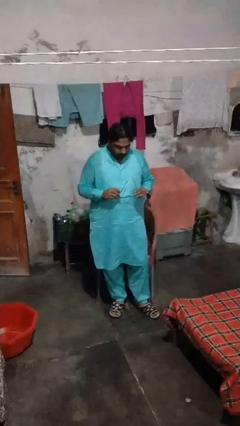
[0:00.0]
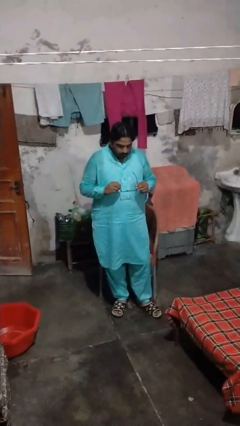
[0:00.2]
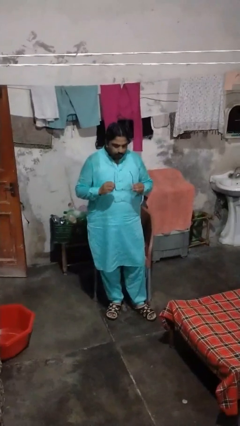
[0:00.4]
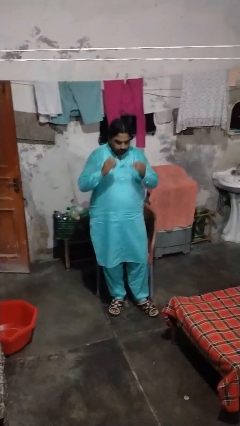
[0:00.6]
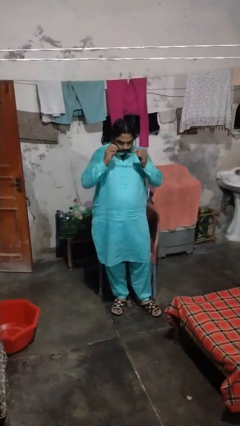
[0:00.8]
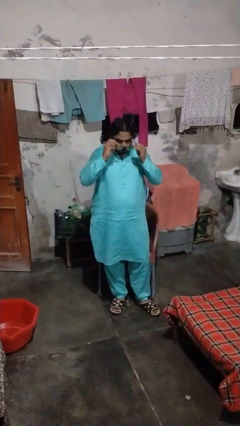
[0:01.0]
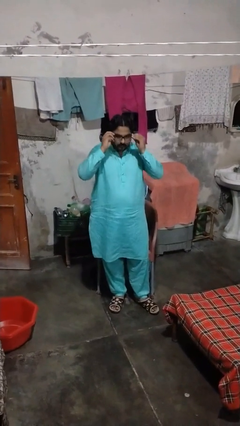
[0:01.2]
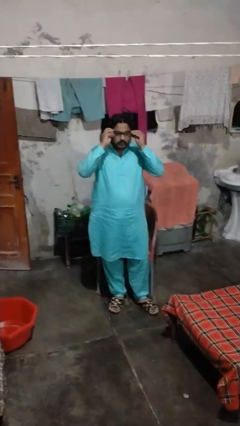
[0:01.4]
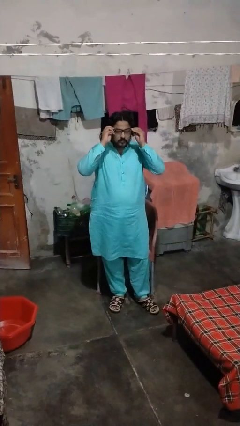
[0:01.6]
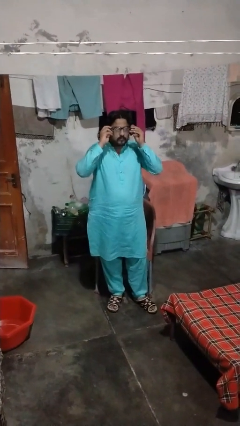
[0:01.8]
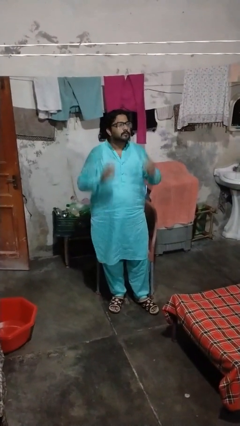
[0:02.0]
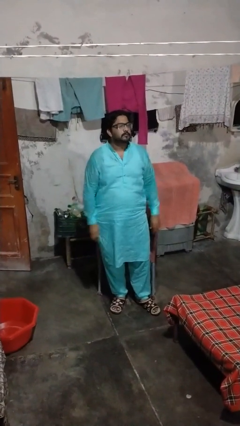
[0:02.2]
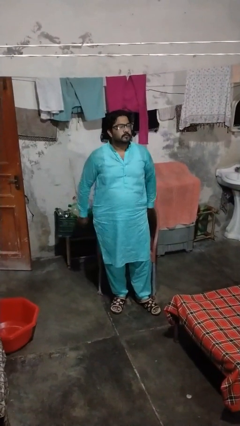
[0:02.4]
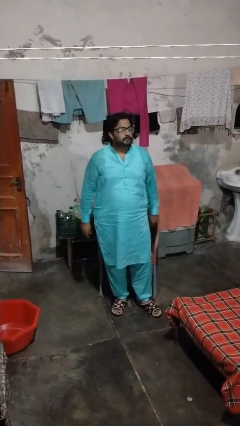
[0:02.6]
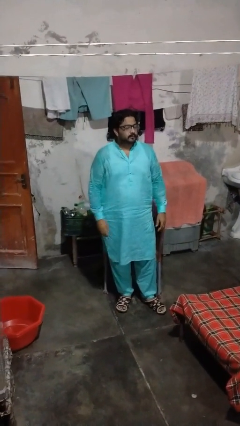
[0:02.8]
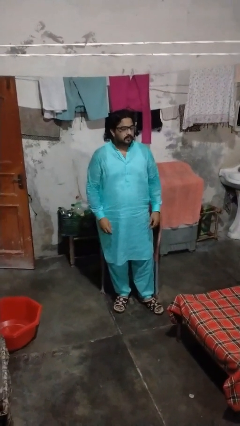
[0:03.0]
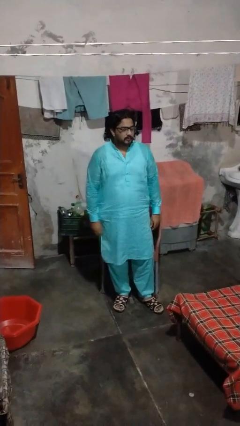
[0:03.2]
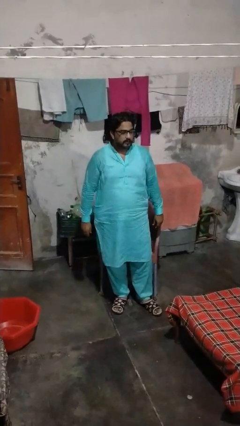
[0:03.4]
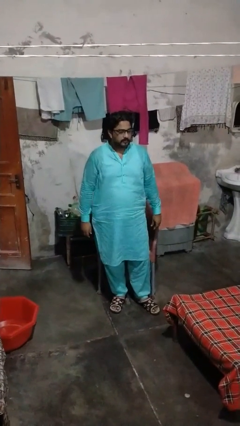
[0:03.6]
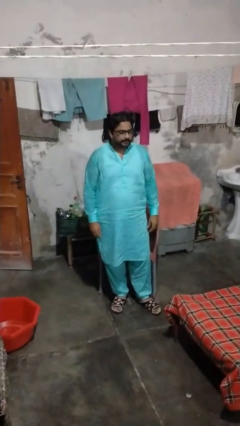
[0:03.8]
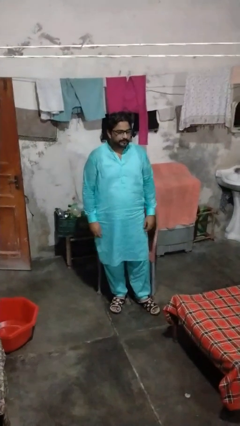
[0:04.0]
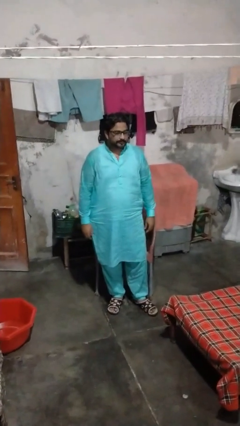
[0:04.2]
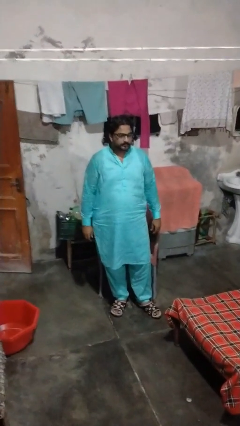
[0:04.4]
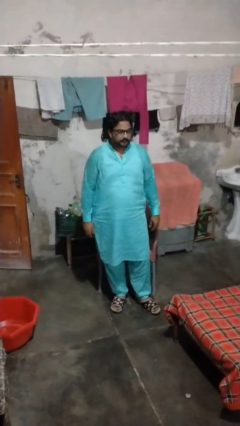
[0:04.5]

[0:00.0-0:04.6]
person puts on glasses

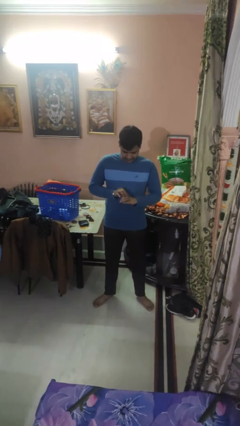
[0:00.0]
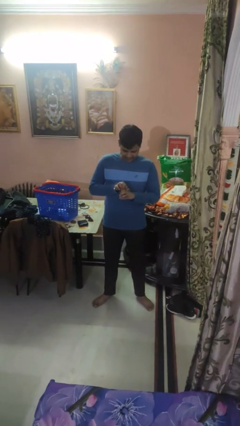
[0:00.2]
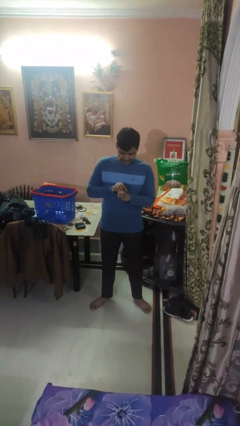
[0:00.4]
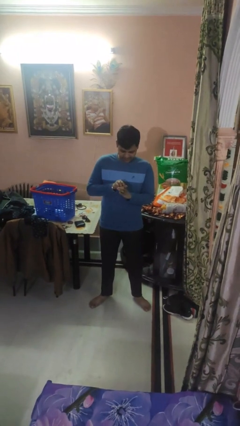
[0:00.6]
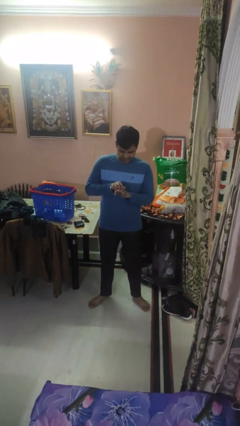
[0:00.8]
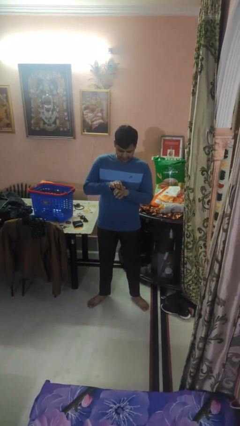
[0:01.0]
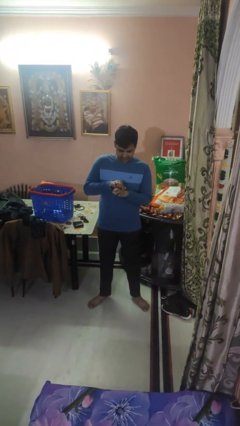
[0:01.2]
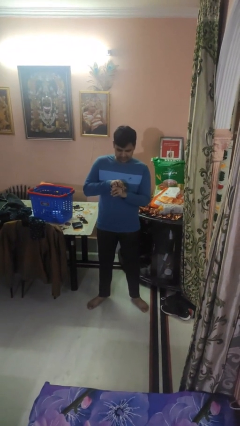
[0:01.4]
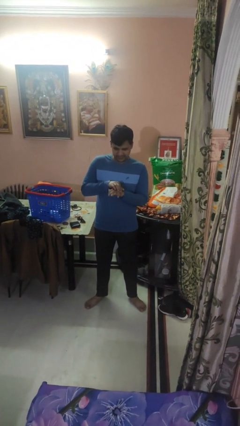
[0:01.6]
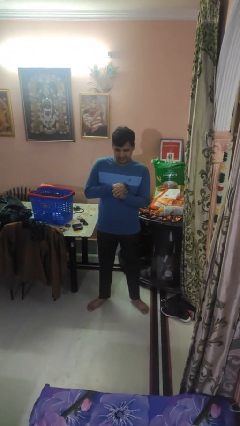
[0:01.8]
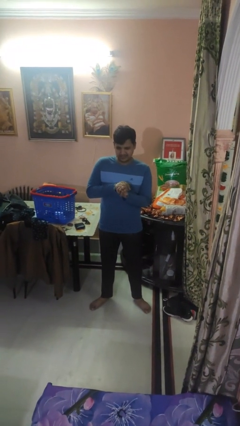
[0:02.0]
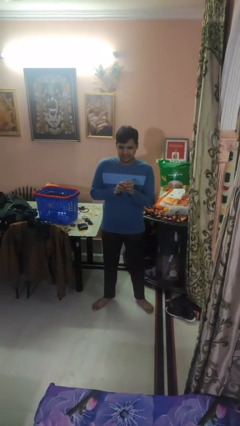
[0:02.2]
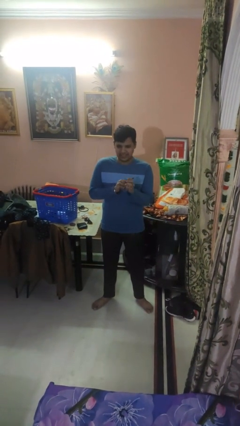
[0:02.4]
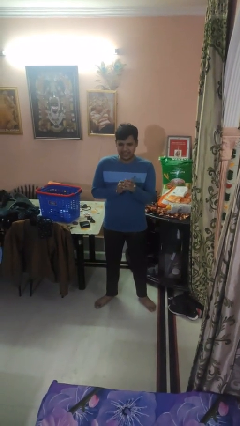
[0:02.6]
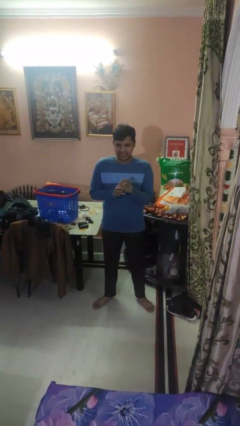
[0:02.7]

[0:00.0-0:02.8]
person puts on wristwatch

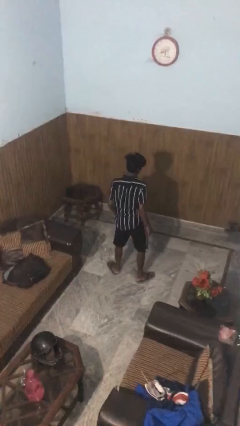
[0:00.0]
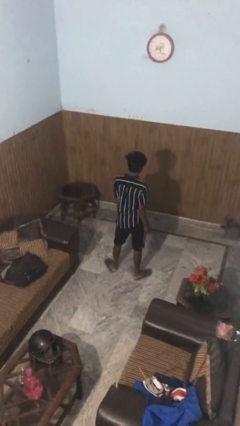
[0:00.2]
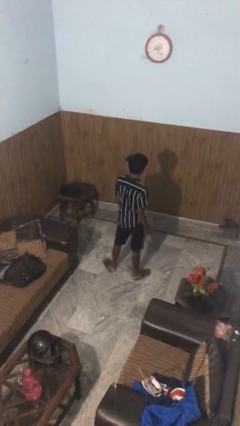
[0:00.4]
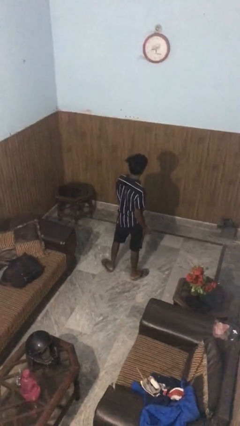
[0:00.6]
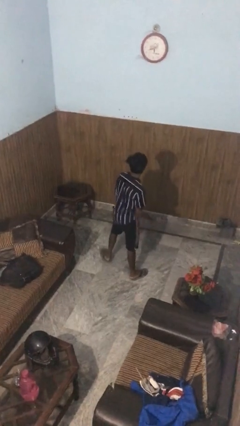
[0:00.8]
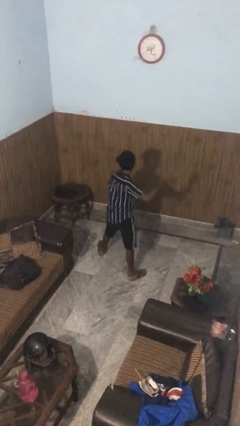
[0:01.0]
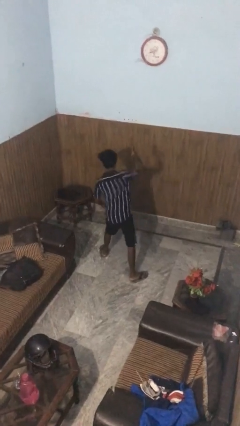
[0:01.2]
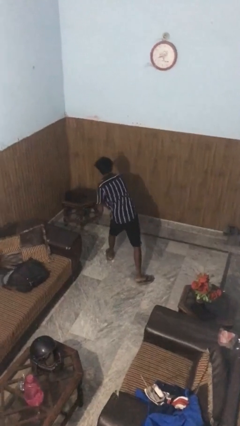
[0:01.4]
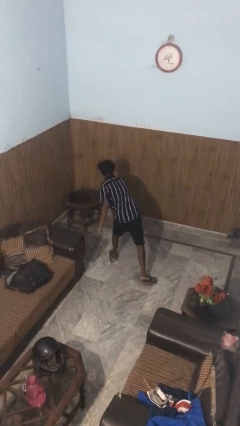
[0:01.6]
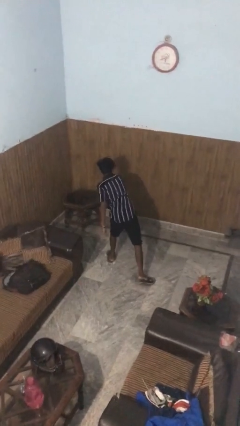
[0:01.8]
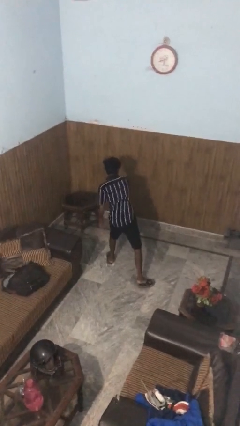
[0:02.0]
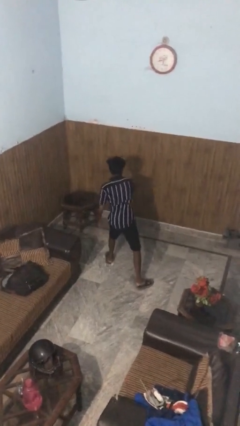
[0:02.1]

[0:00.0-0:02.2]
person karate chop

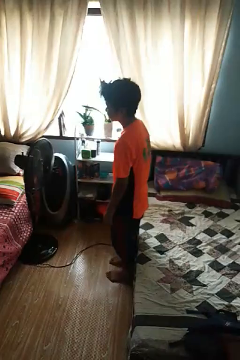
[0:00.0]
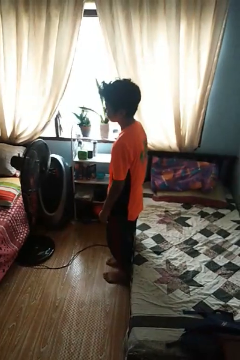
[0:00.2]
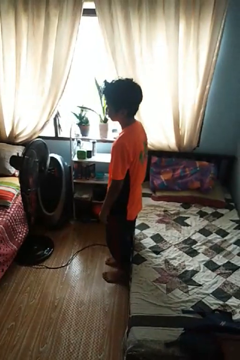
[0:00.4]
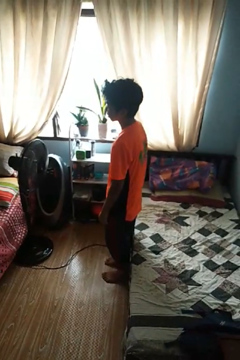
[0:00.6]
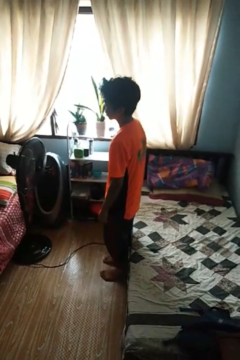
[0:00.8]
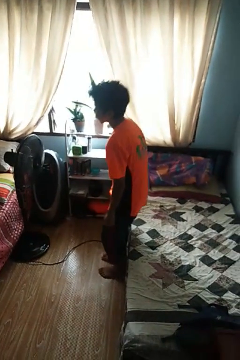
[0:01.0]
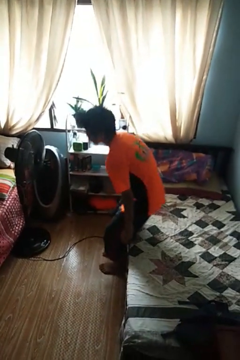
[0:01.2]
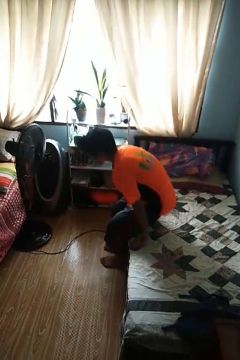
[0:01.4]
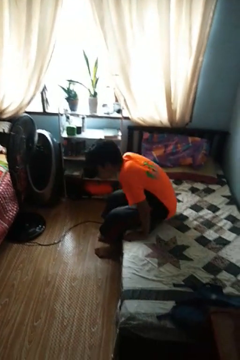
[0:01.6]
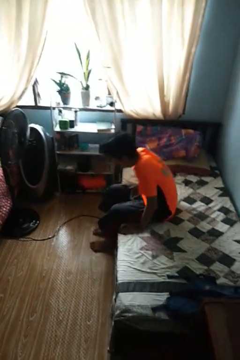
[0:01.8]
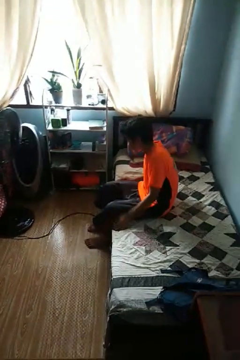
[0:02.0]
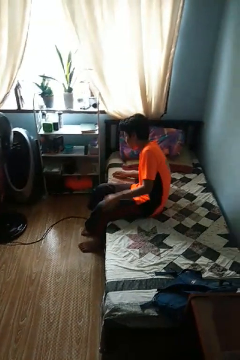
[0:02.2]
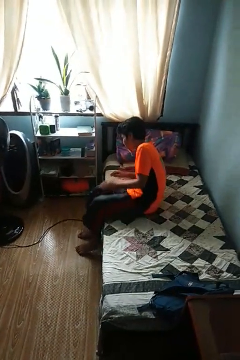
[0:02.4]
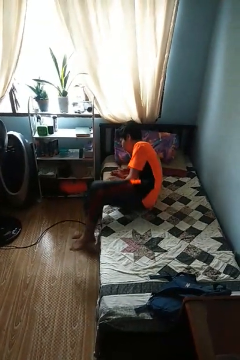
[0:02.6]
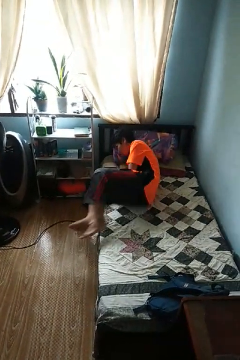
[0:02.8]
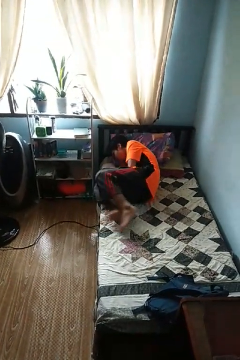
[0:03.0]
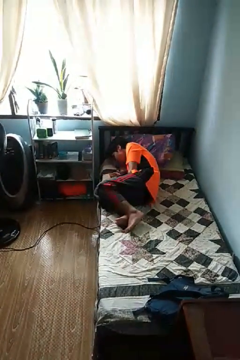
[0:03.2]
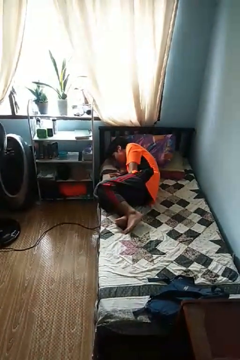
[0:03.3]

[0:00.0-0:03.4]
person lies down on bed

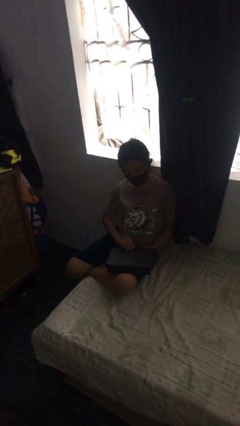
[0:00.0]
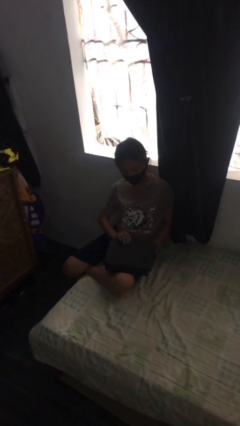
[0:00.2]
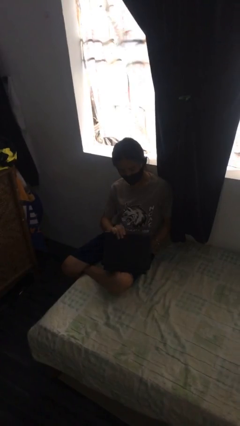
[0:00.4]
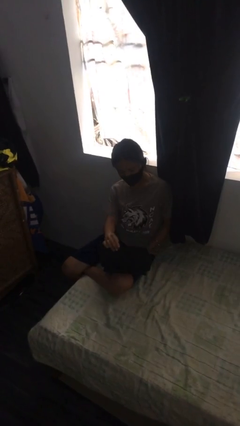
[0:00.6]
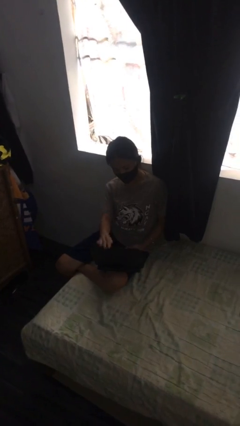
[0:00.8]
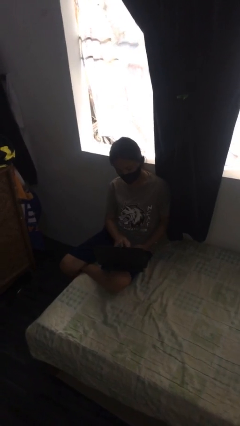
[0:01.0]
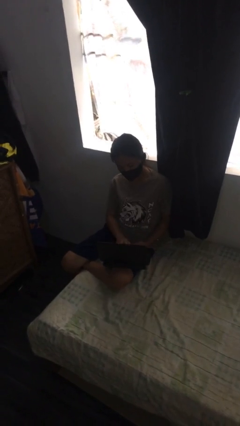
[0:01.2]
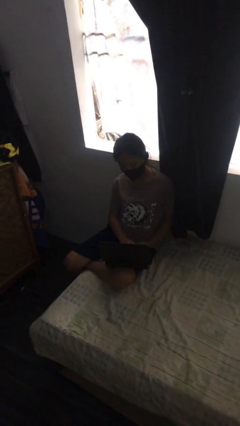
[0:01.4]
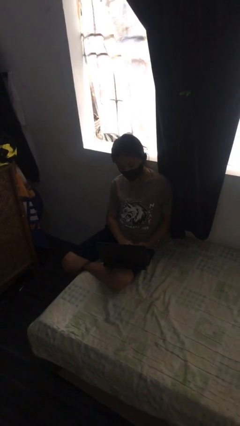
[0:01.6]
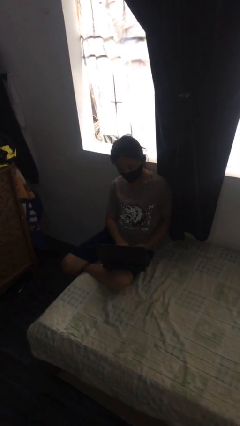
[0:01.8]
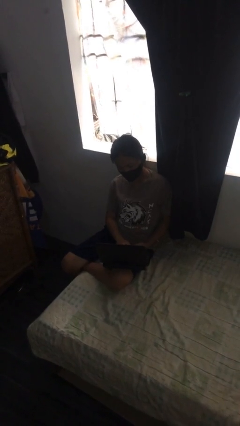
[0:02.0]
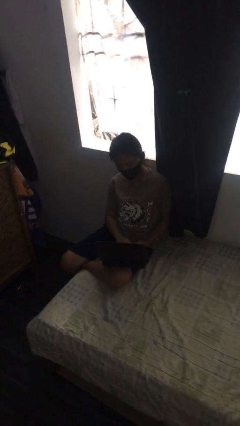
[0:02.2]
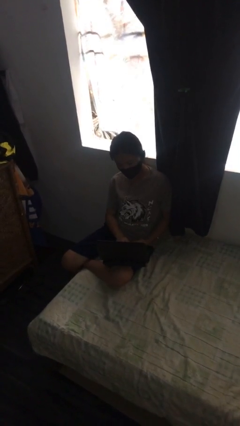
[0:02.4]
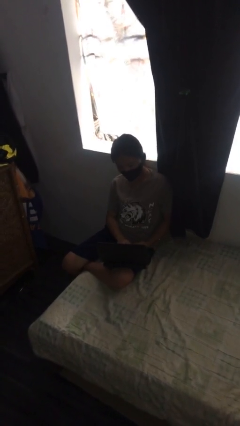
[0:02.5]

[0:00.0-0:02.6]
person interacts with laptop

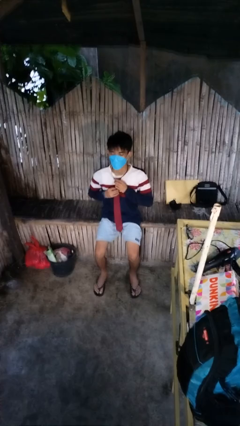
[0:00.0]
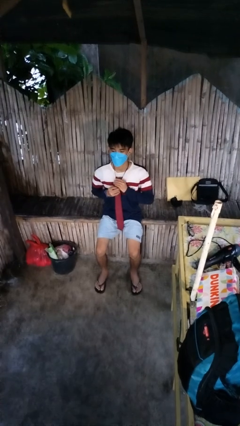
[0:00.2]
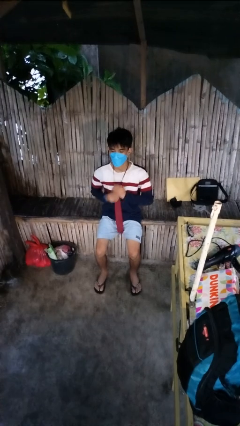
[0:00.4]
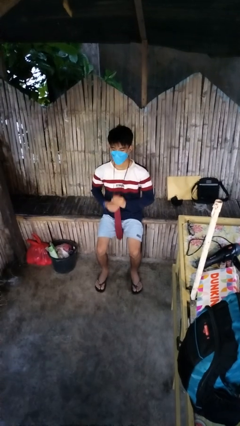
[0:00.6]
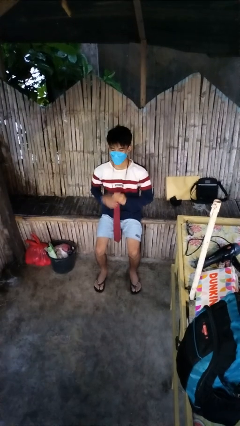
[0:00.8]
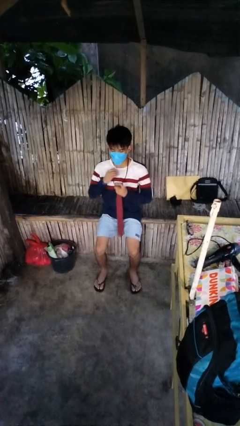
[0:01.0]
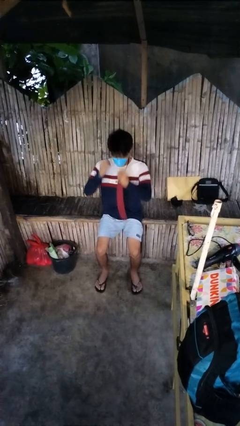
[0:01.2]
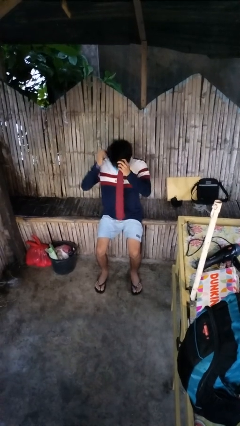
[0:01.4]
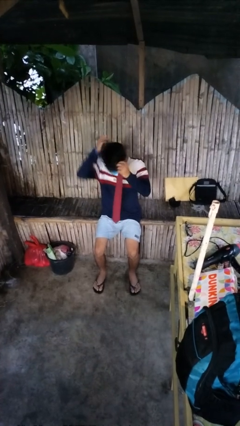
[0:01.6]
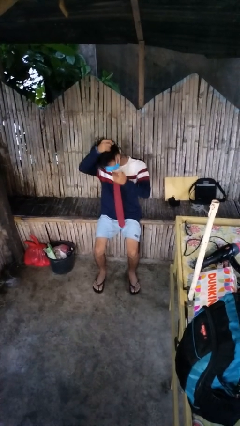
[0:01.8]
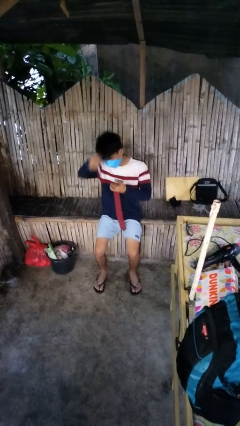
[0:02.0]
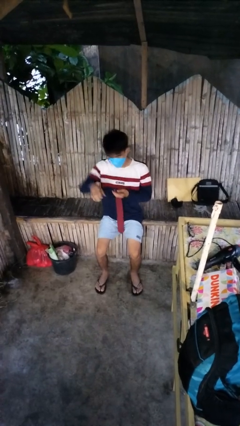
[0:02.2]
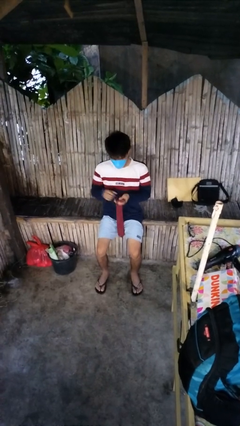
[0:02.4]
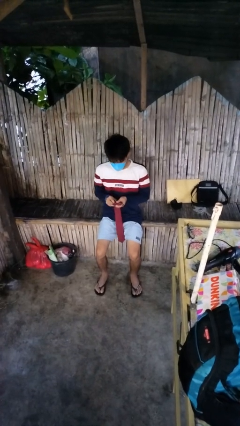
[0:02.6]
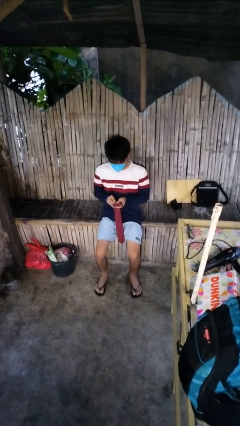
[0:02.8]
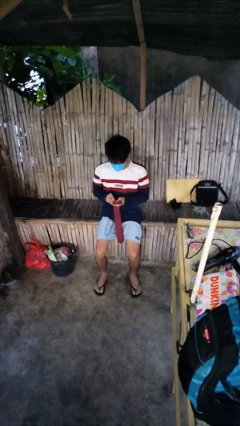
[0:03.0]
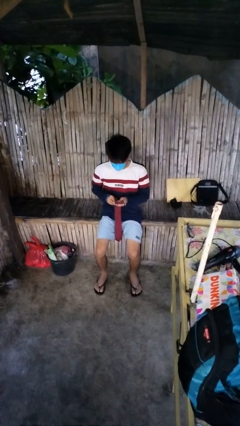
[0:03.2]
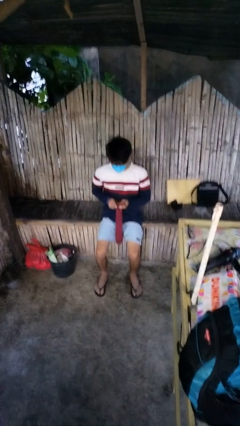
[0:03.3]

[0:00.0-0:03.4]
person takes off necktie
